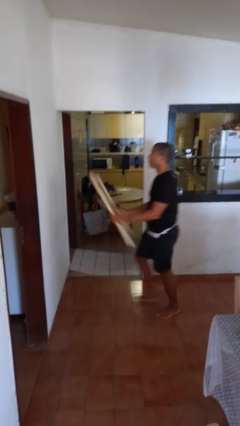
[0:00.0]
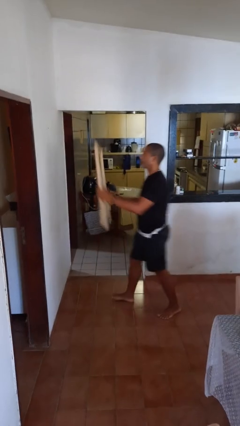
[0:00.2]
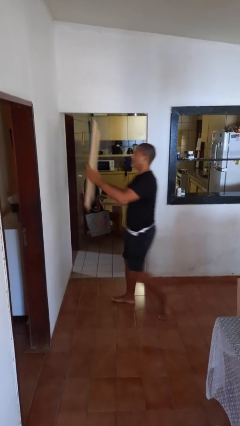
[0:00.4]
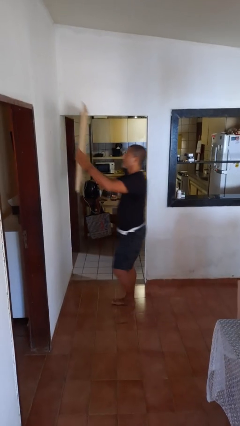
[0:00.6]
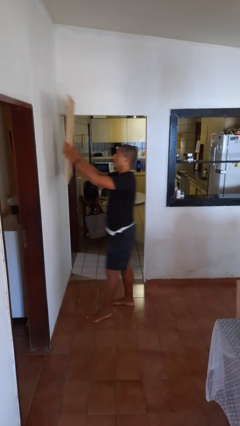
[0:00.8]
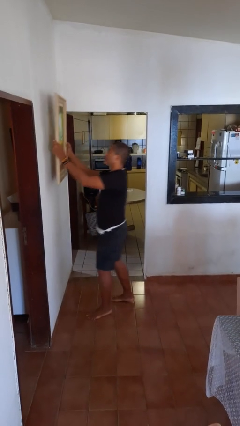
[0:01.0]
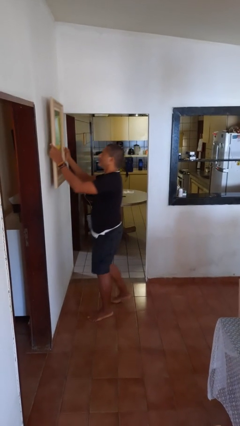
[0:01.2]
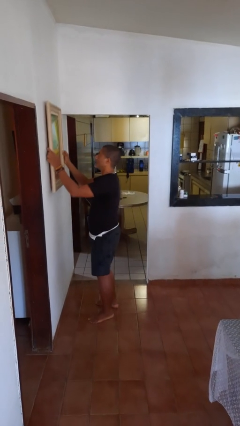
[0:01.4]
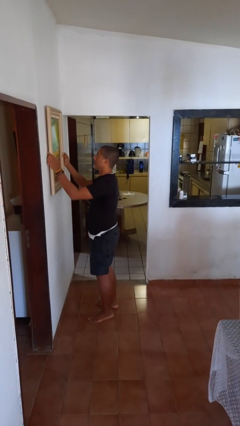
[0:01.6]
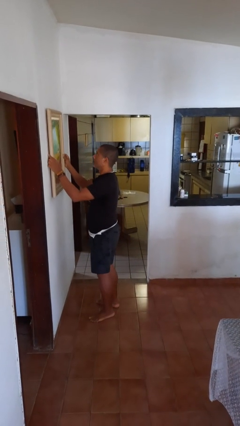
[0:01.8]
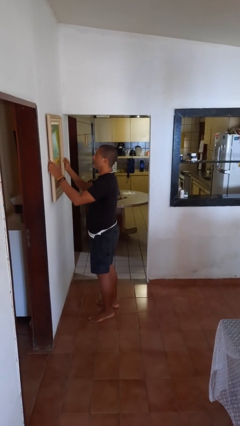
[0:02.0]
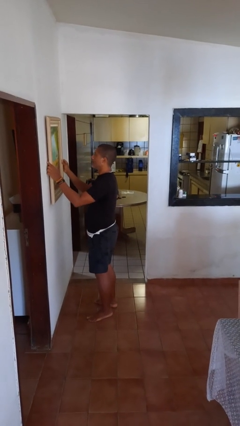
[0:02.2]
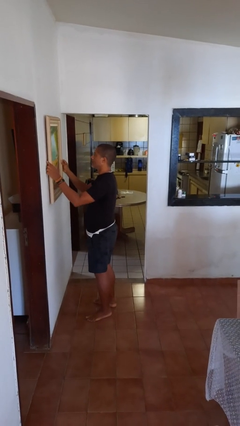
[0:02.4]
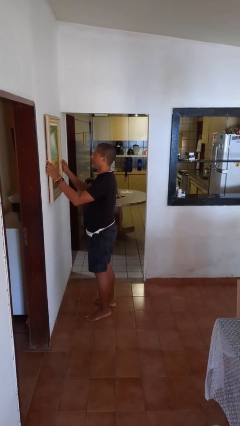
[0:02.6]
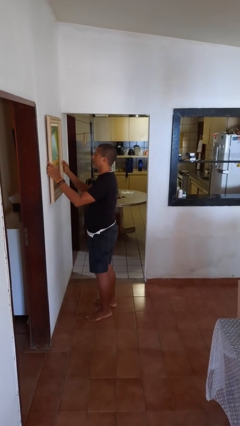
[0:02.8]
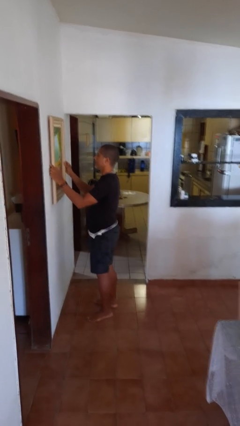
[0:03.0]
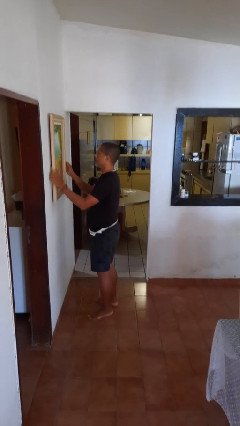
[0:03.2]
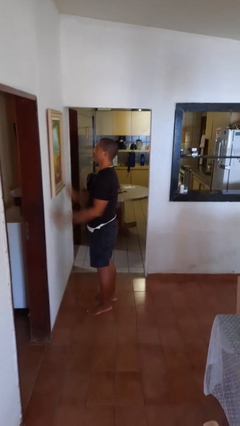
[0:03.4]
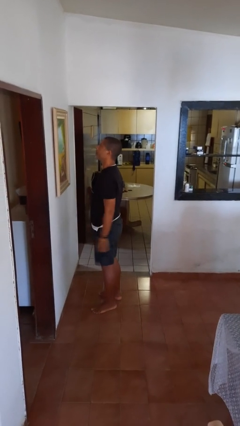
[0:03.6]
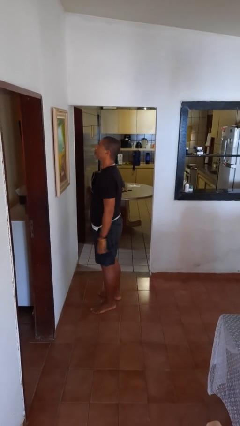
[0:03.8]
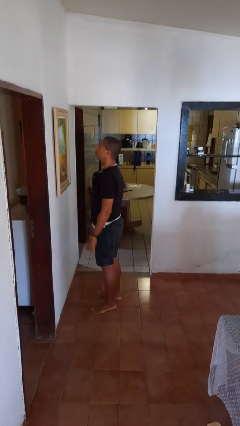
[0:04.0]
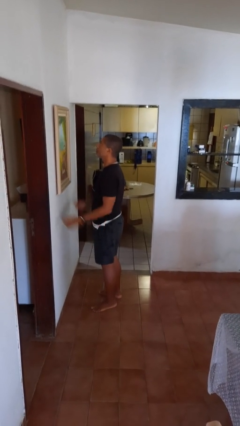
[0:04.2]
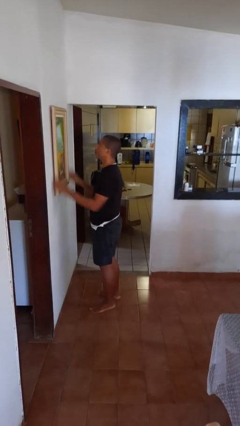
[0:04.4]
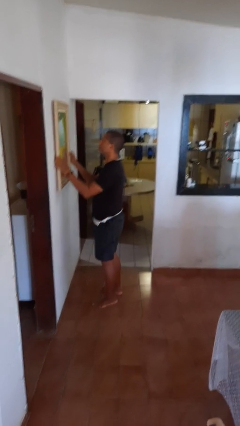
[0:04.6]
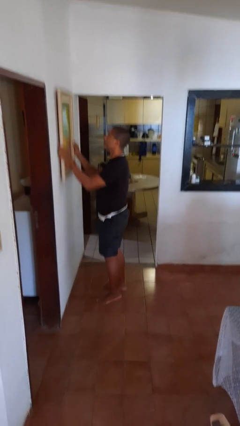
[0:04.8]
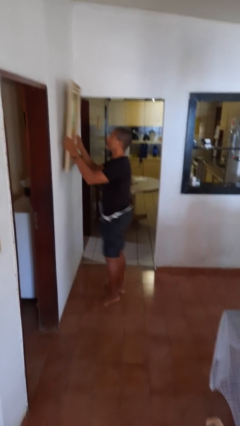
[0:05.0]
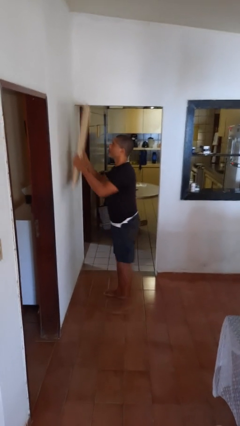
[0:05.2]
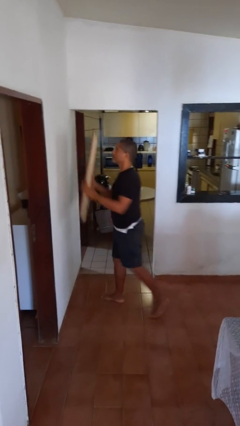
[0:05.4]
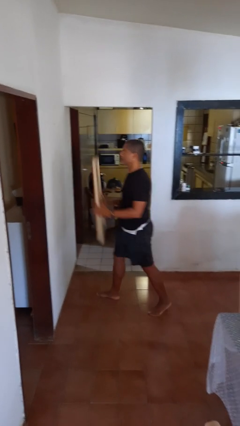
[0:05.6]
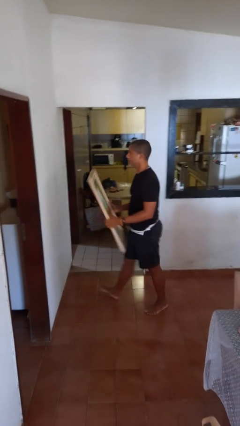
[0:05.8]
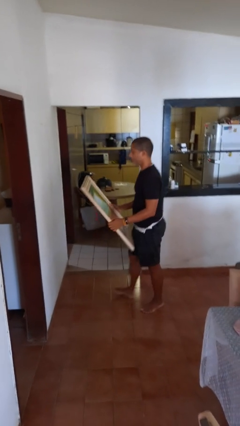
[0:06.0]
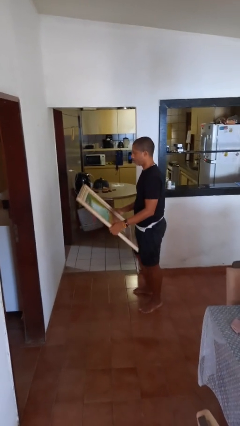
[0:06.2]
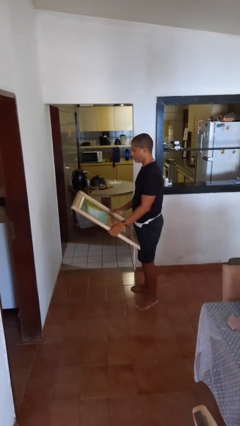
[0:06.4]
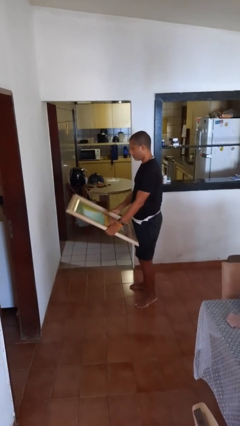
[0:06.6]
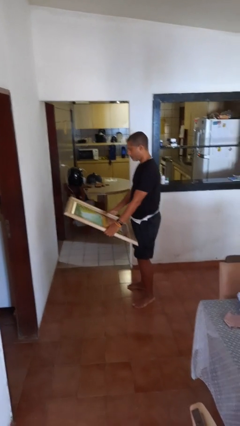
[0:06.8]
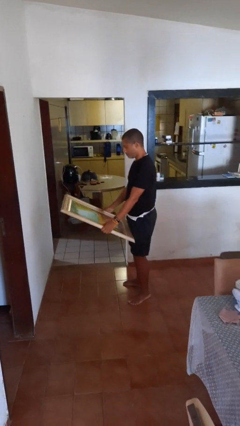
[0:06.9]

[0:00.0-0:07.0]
person puts up picture frame

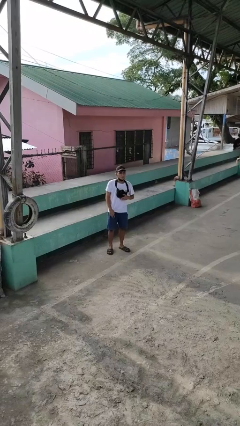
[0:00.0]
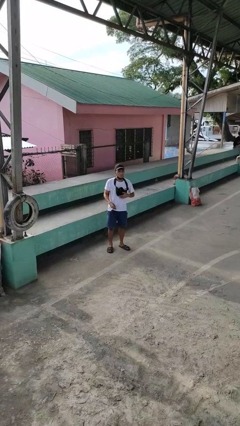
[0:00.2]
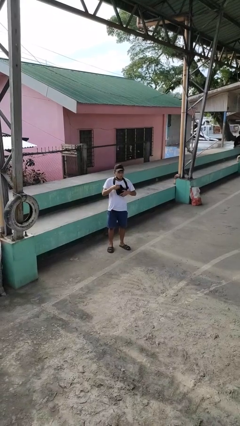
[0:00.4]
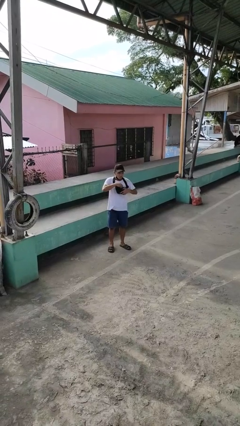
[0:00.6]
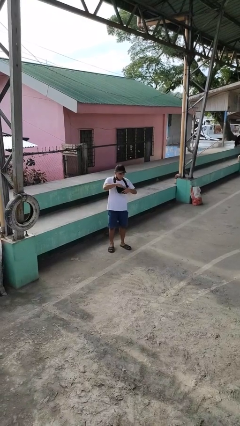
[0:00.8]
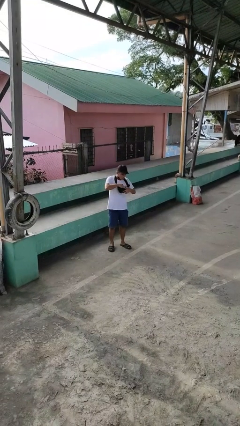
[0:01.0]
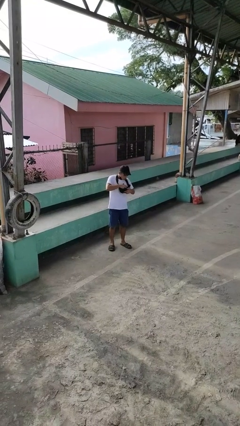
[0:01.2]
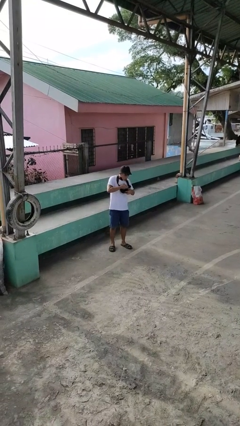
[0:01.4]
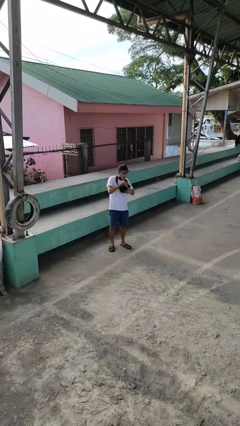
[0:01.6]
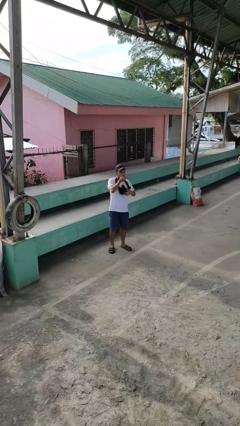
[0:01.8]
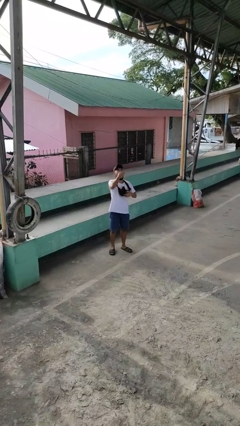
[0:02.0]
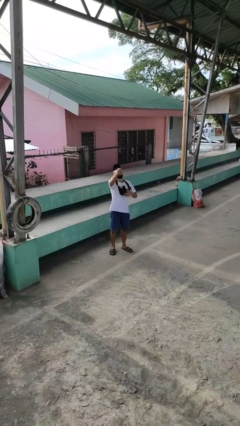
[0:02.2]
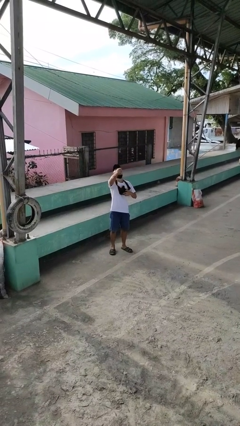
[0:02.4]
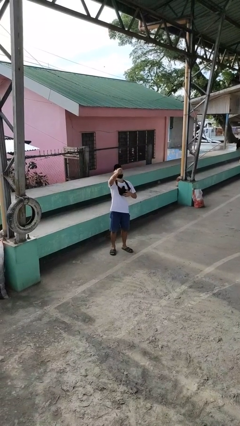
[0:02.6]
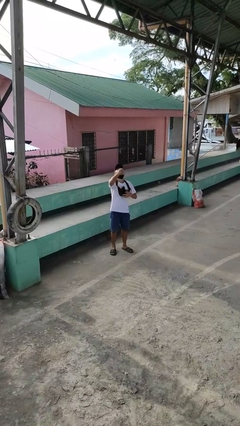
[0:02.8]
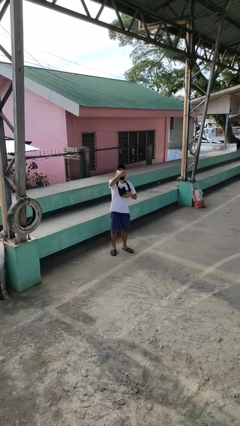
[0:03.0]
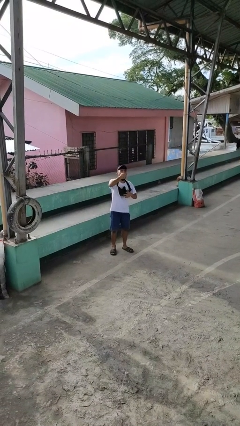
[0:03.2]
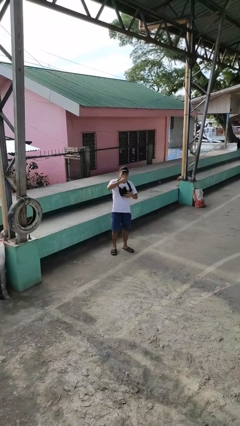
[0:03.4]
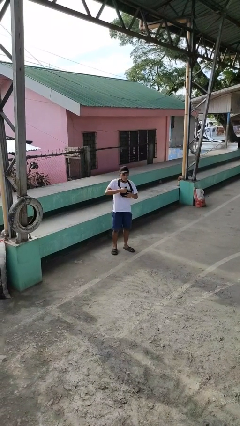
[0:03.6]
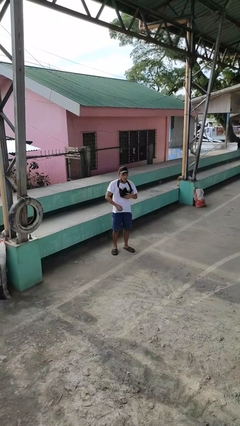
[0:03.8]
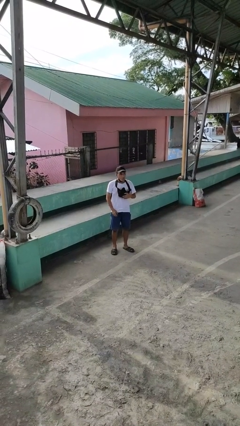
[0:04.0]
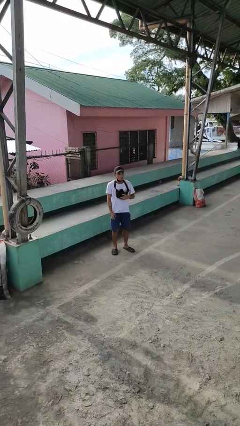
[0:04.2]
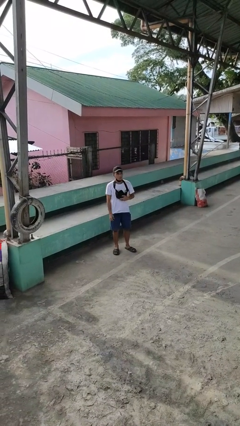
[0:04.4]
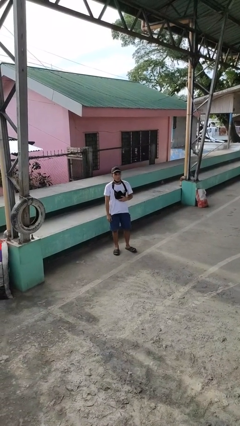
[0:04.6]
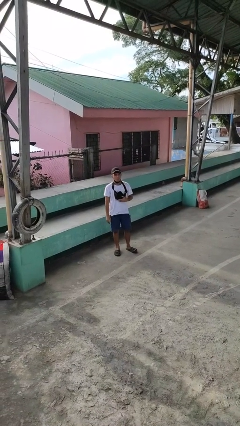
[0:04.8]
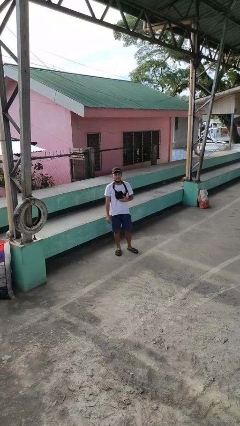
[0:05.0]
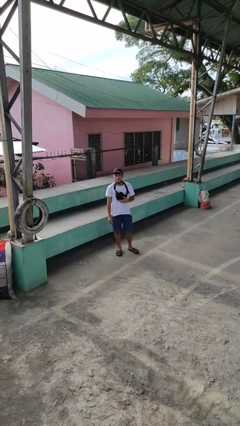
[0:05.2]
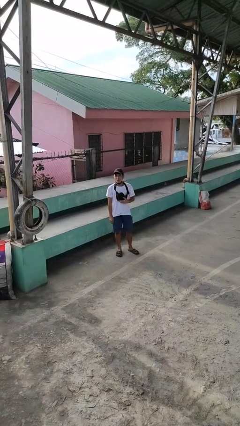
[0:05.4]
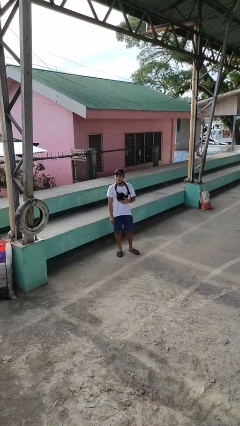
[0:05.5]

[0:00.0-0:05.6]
person eats snack from bag

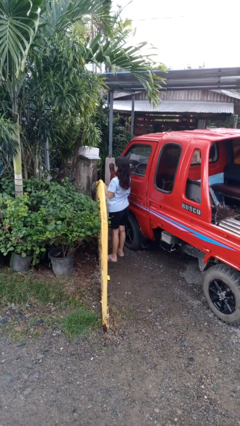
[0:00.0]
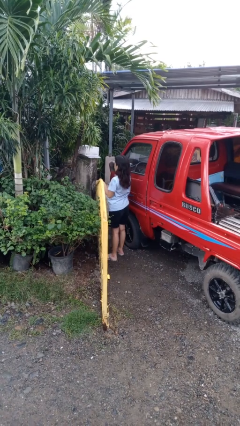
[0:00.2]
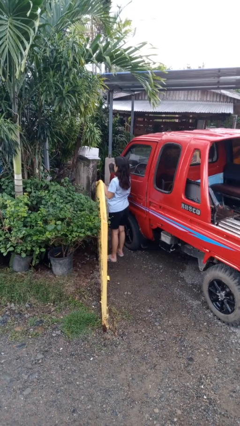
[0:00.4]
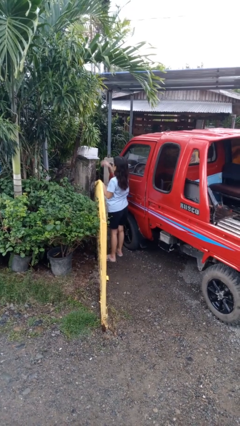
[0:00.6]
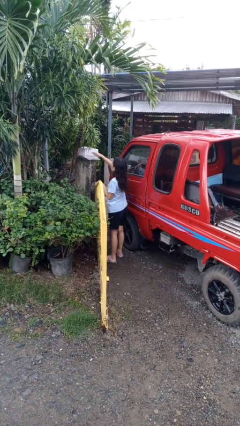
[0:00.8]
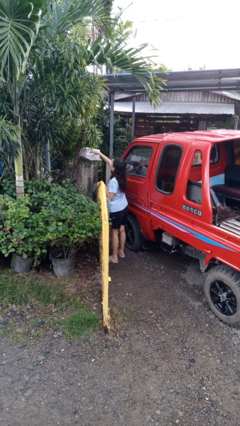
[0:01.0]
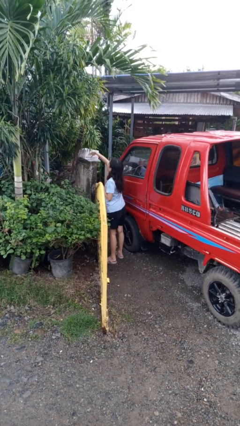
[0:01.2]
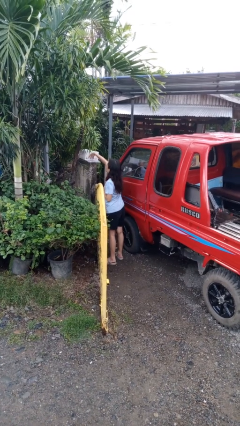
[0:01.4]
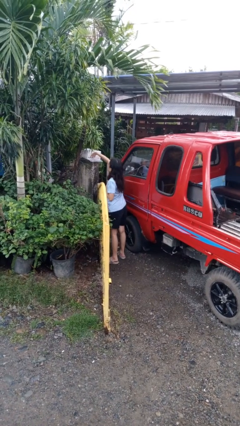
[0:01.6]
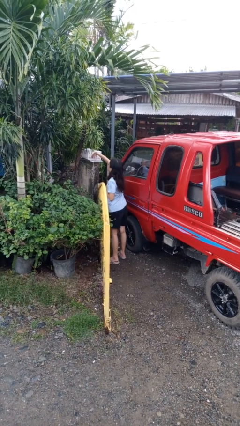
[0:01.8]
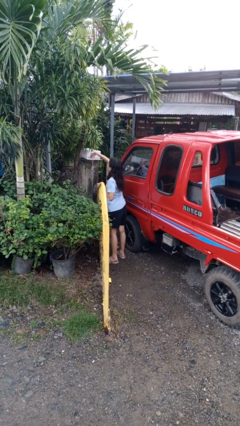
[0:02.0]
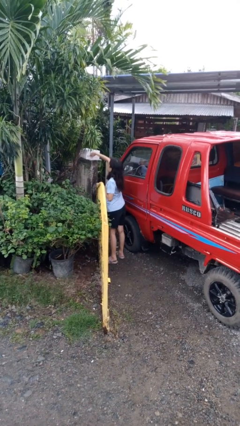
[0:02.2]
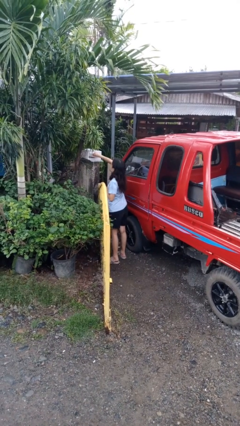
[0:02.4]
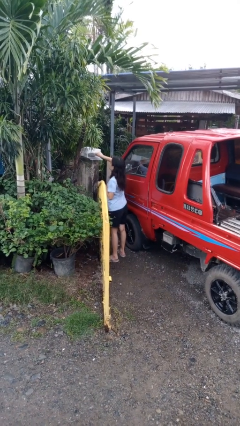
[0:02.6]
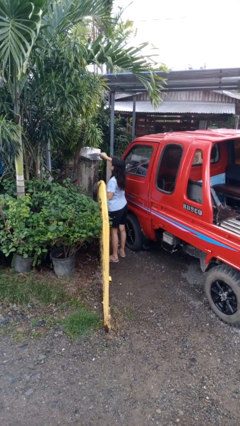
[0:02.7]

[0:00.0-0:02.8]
person takes letters from mailbox

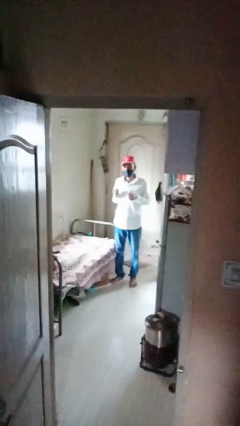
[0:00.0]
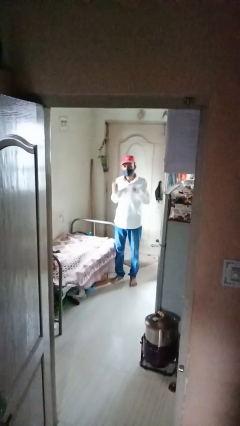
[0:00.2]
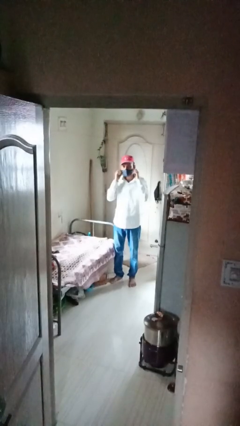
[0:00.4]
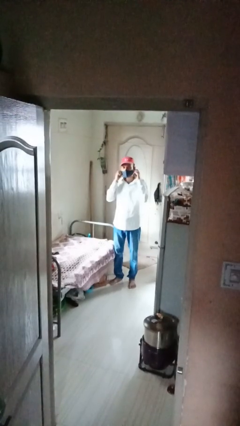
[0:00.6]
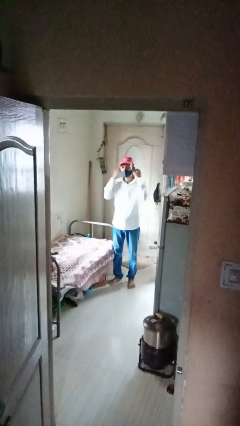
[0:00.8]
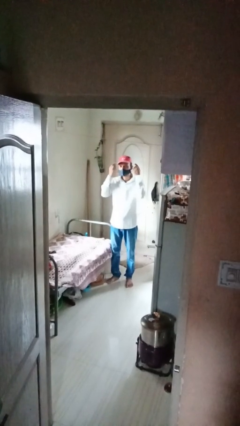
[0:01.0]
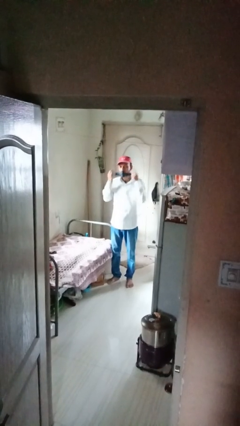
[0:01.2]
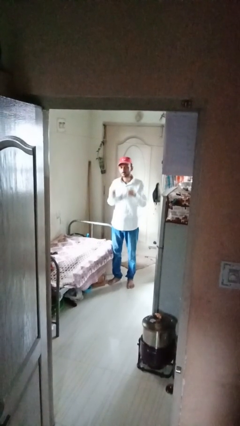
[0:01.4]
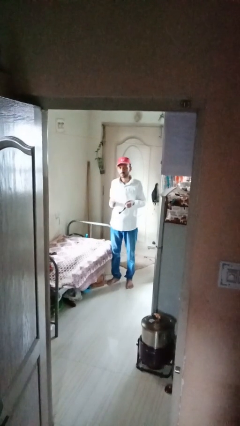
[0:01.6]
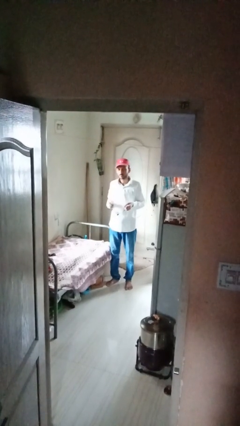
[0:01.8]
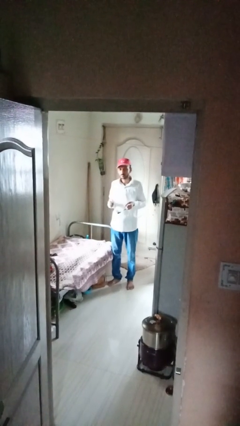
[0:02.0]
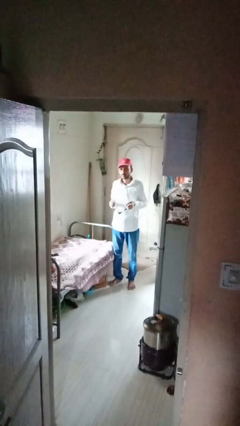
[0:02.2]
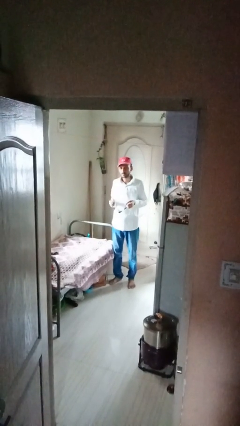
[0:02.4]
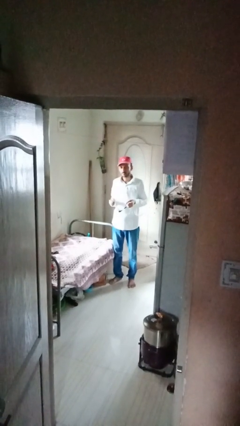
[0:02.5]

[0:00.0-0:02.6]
person takes off facemask
